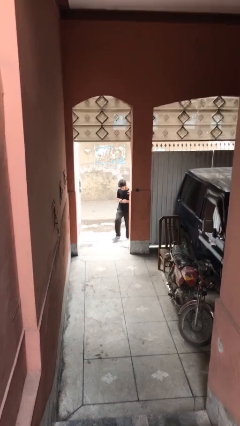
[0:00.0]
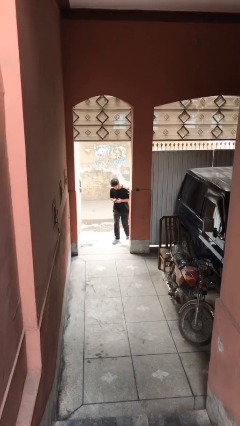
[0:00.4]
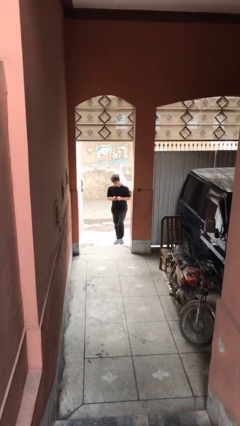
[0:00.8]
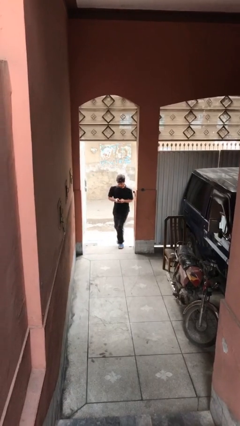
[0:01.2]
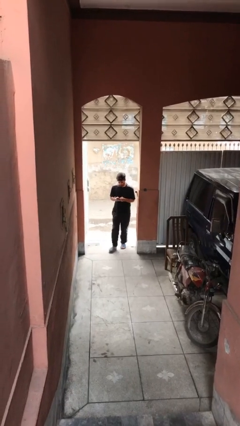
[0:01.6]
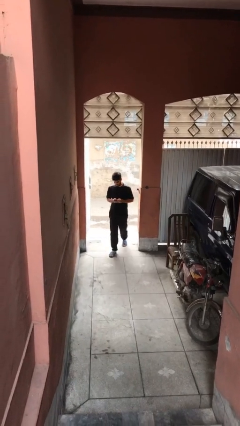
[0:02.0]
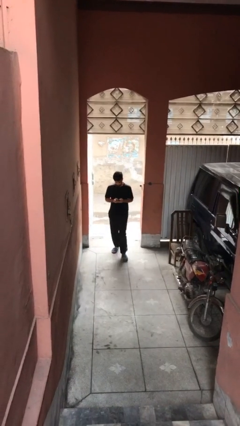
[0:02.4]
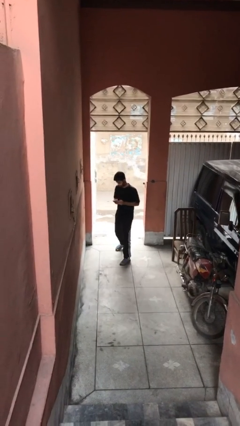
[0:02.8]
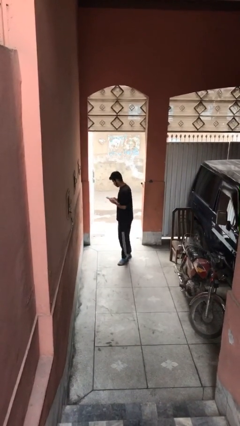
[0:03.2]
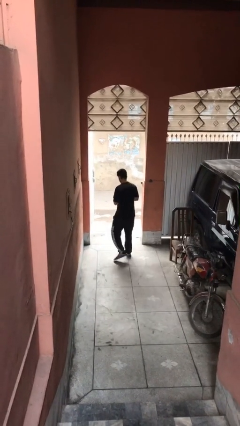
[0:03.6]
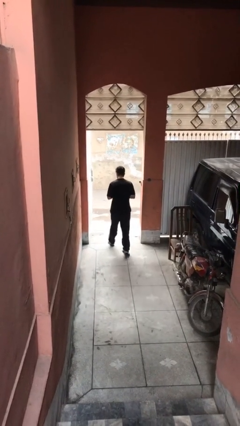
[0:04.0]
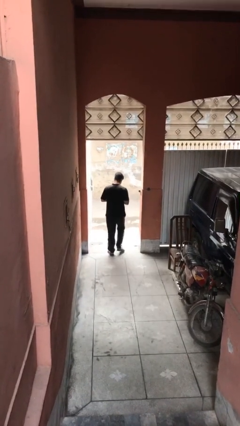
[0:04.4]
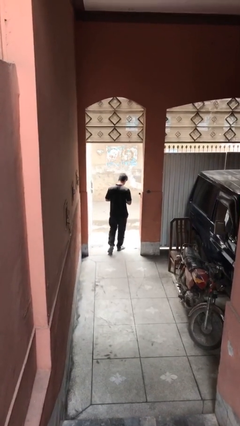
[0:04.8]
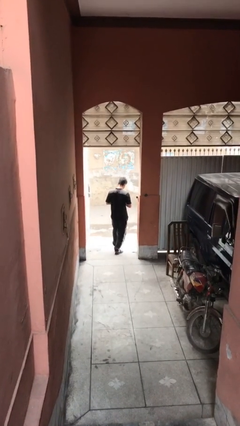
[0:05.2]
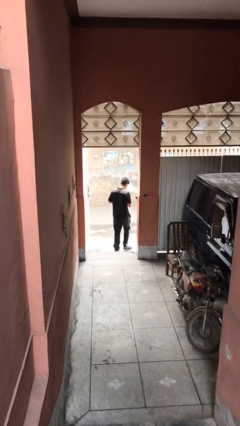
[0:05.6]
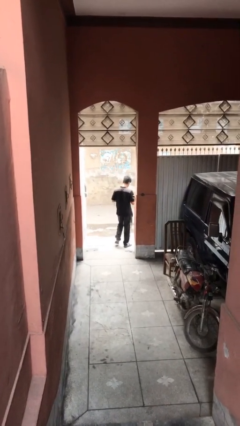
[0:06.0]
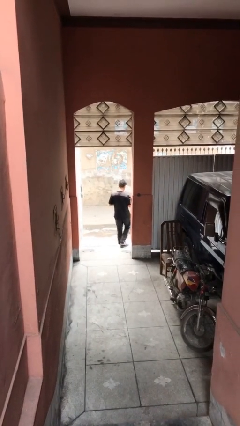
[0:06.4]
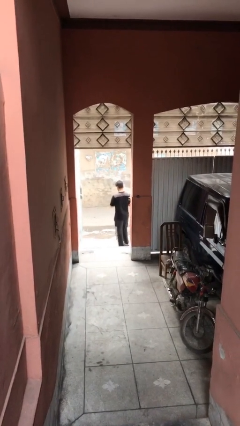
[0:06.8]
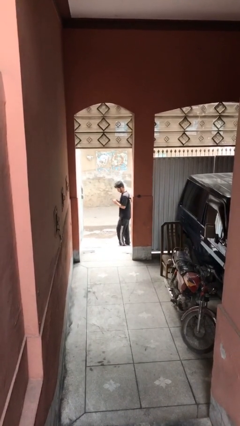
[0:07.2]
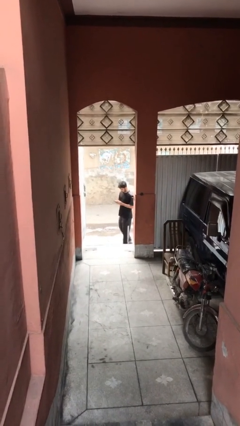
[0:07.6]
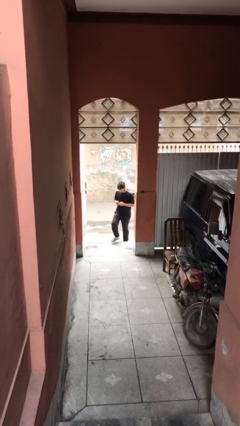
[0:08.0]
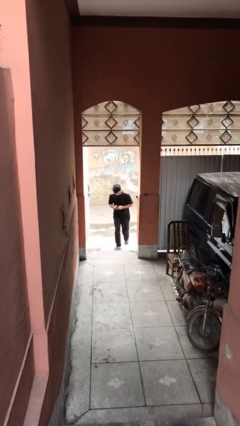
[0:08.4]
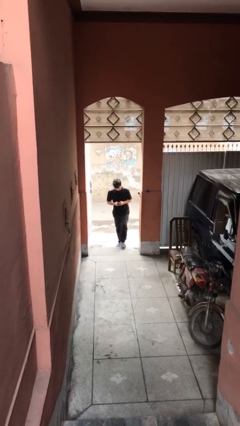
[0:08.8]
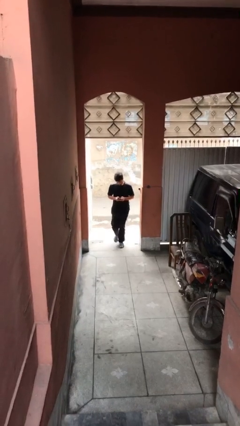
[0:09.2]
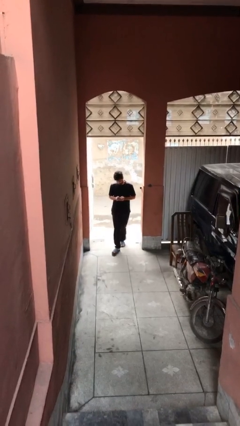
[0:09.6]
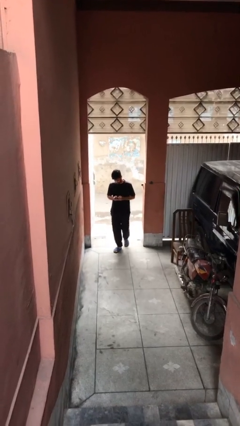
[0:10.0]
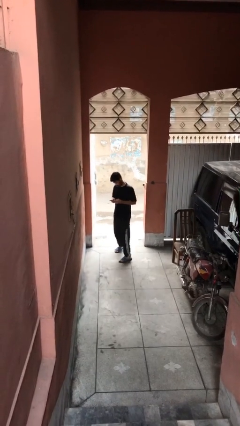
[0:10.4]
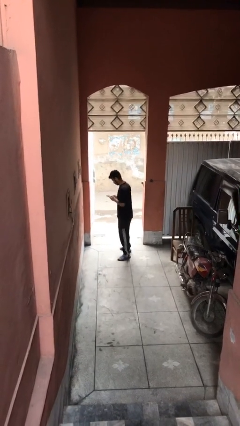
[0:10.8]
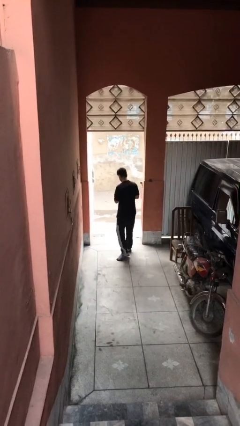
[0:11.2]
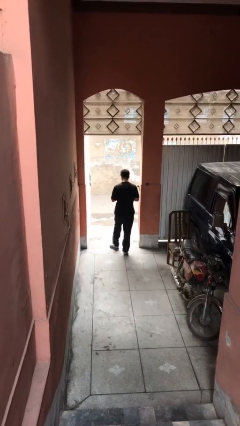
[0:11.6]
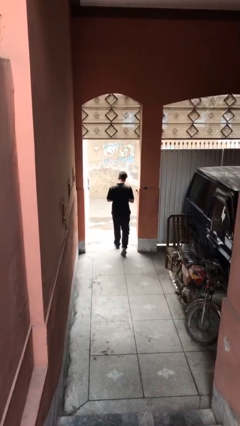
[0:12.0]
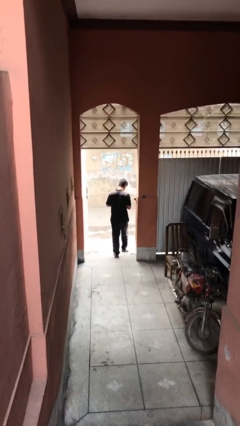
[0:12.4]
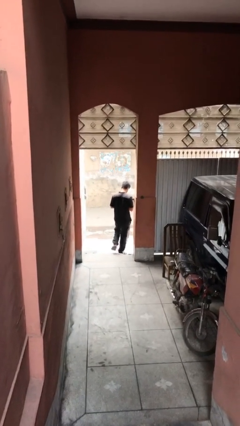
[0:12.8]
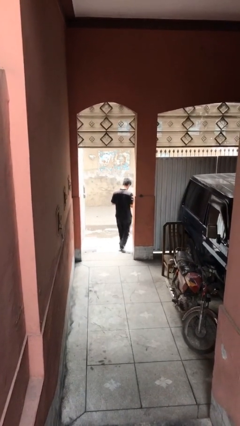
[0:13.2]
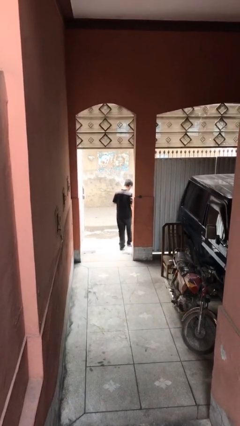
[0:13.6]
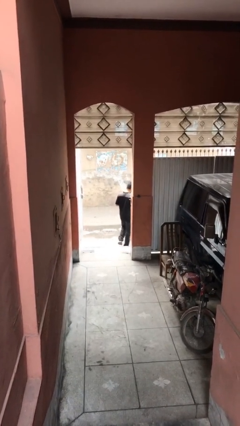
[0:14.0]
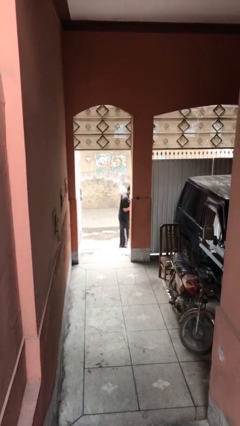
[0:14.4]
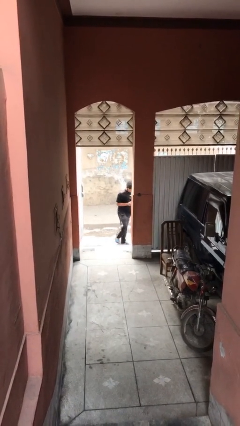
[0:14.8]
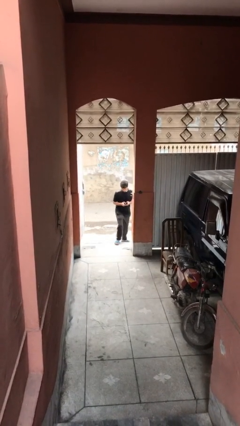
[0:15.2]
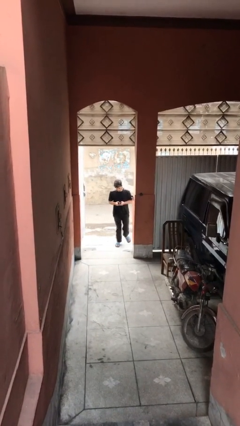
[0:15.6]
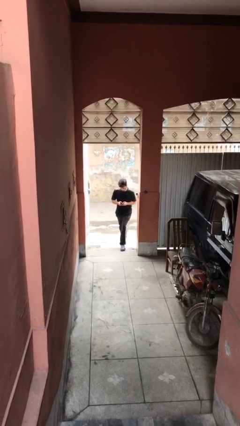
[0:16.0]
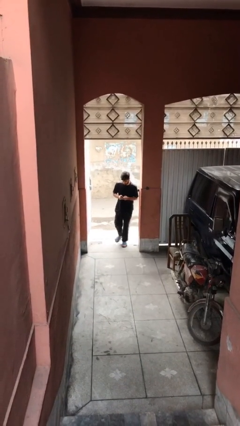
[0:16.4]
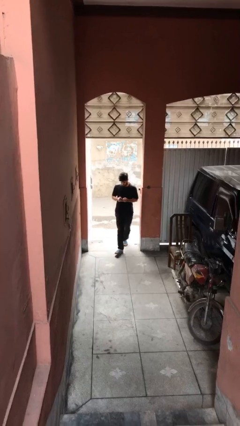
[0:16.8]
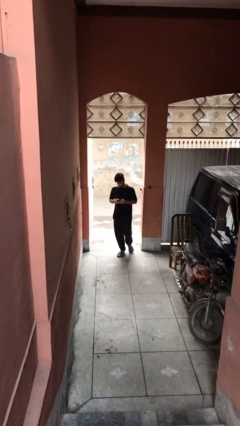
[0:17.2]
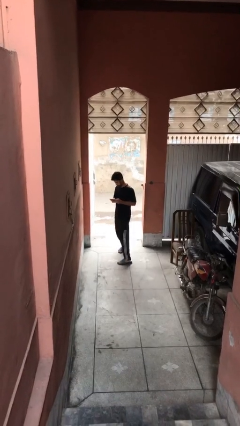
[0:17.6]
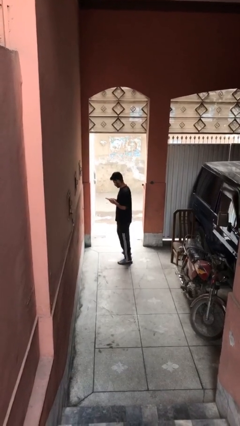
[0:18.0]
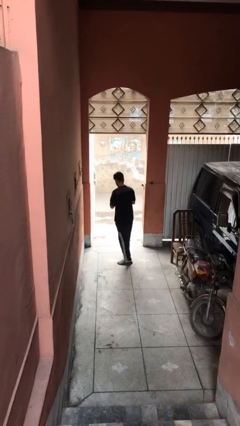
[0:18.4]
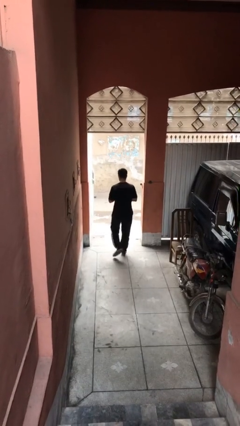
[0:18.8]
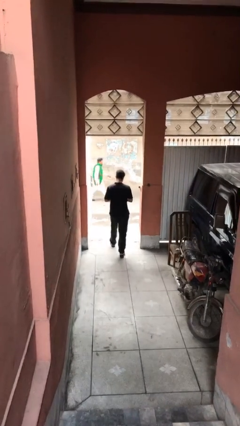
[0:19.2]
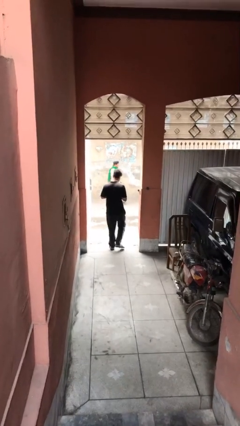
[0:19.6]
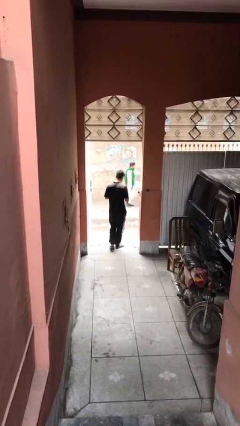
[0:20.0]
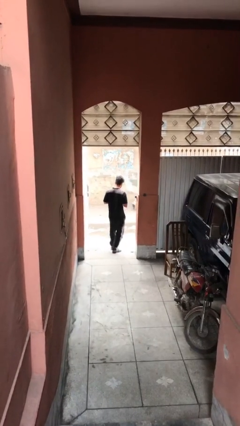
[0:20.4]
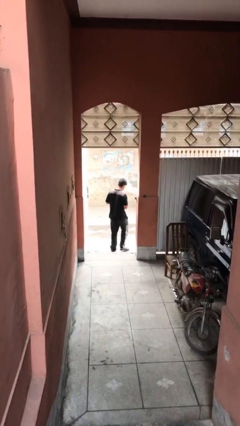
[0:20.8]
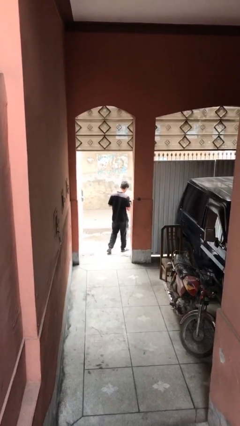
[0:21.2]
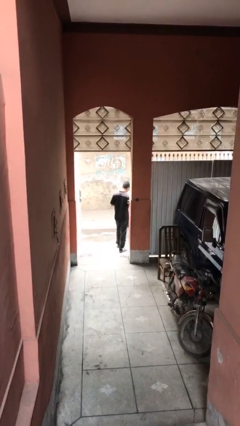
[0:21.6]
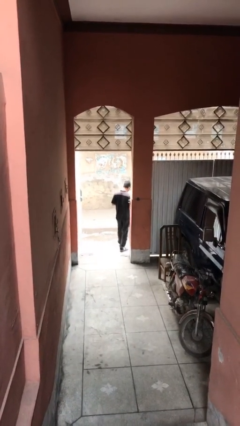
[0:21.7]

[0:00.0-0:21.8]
person texts on phone

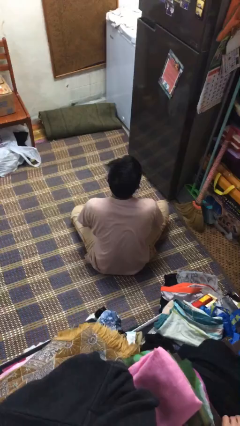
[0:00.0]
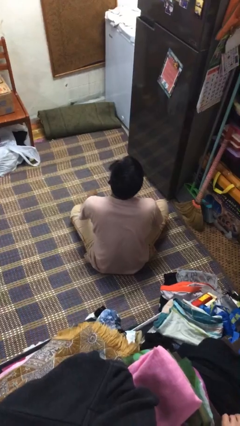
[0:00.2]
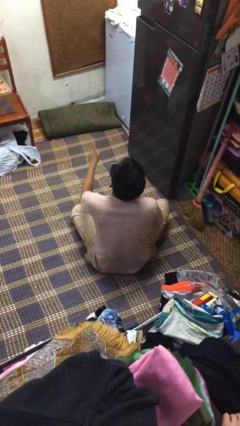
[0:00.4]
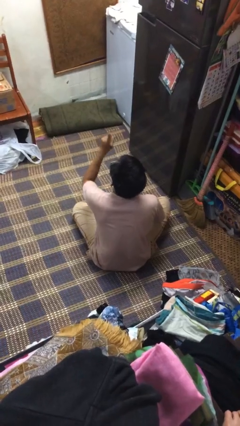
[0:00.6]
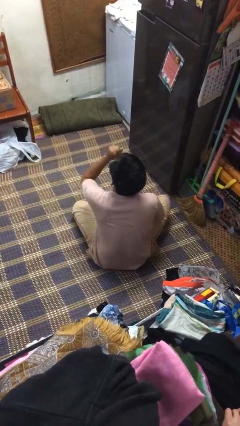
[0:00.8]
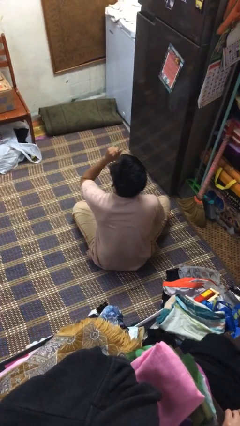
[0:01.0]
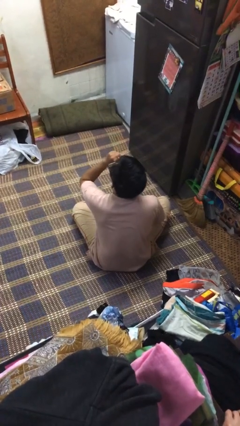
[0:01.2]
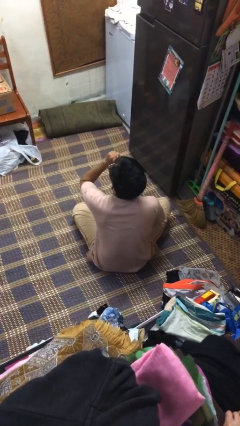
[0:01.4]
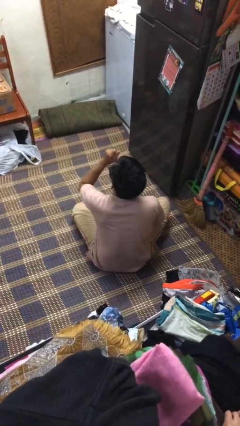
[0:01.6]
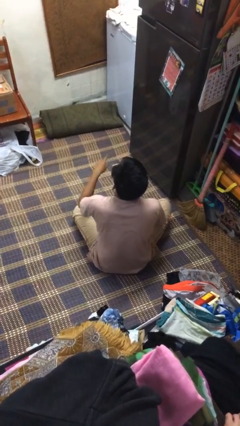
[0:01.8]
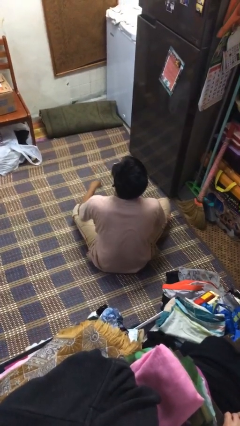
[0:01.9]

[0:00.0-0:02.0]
person gestures be quiet

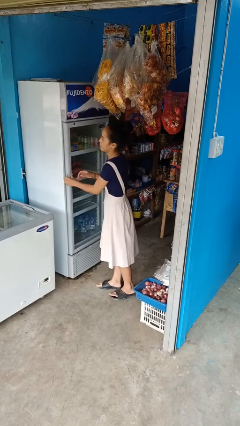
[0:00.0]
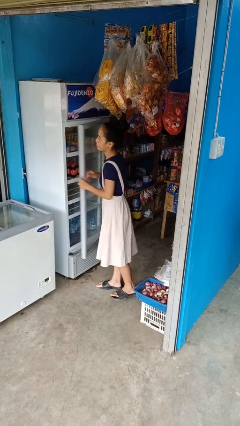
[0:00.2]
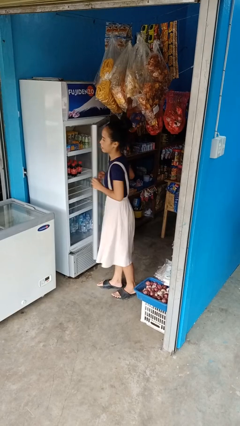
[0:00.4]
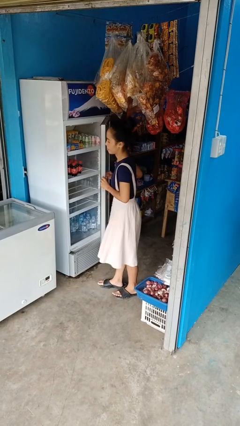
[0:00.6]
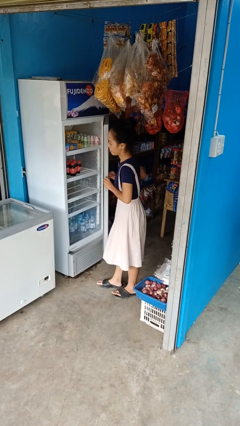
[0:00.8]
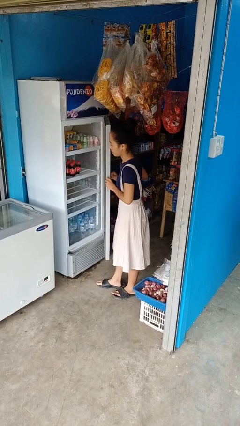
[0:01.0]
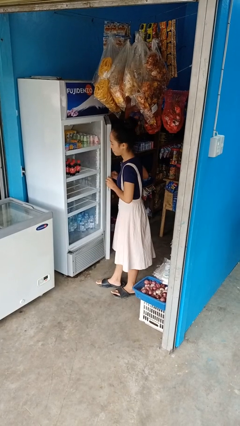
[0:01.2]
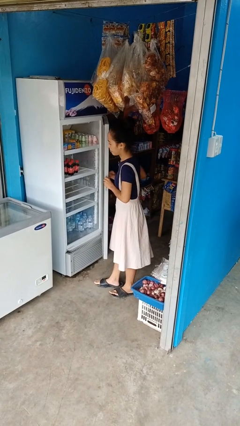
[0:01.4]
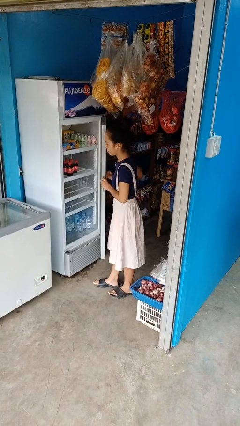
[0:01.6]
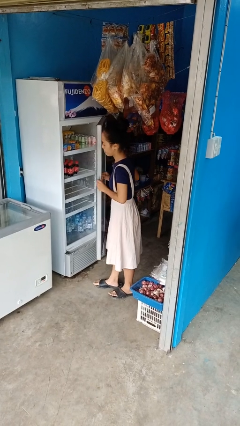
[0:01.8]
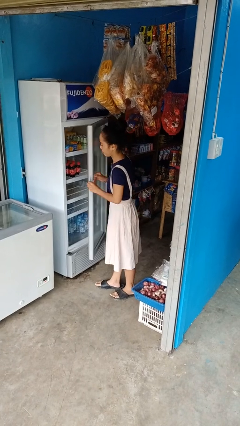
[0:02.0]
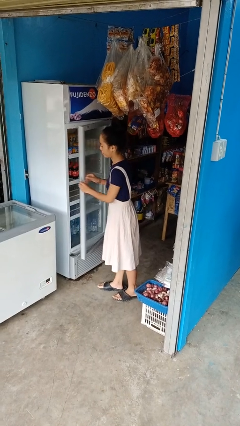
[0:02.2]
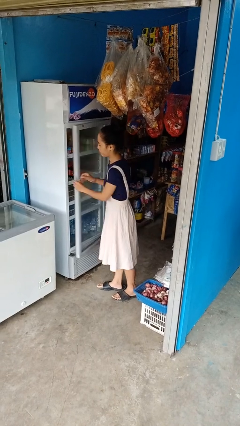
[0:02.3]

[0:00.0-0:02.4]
person opens refrigerator

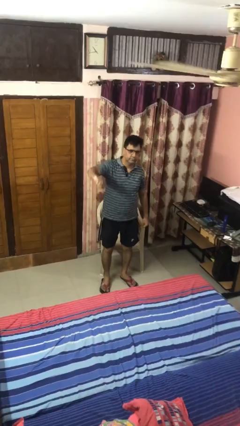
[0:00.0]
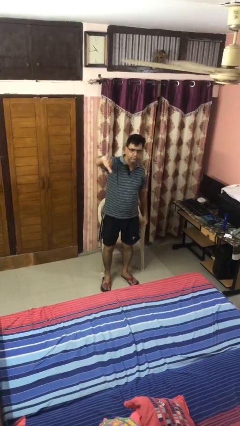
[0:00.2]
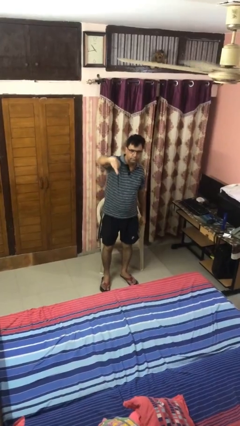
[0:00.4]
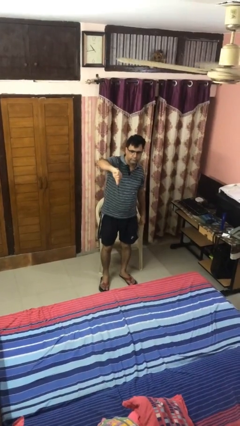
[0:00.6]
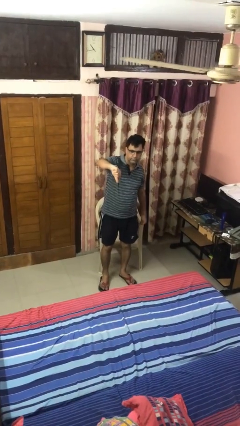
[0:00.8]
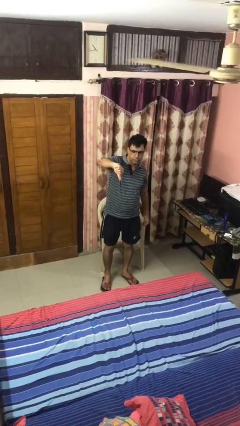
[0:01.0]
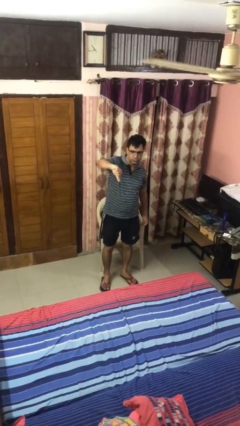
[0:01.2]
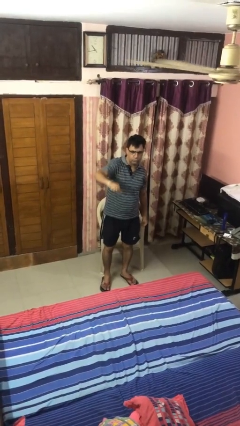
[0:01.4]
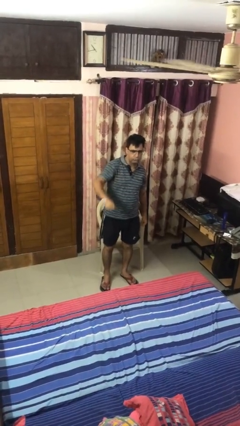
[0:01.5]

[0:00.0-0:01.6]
person gestures thumbs down

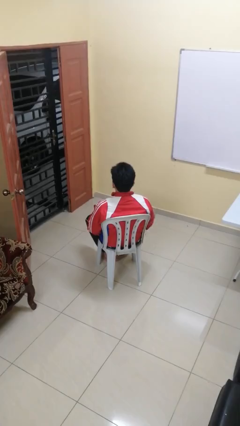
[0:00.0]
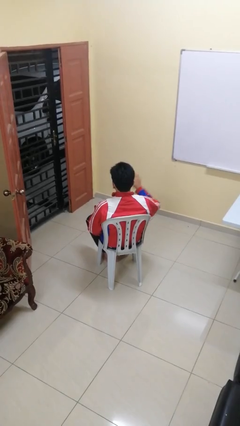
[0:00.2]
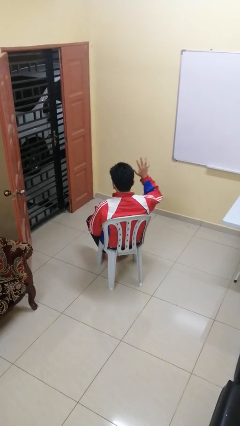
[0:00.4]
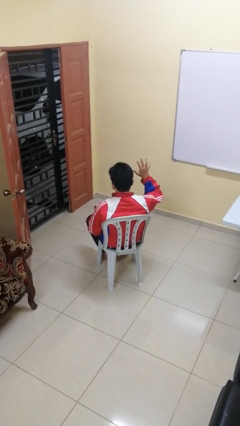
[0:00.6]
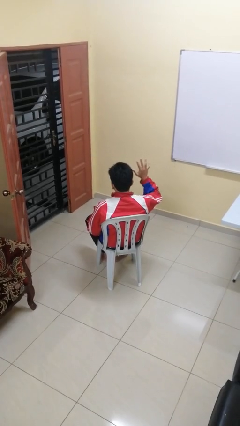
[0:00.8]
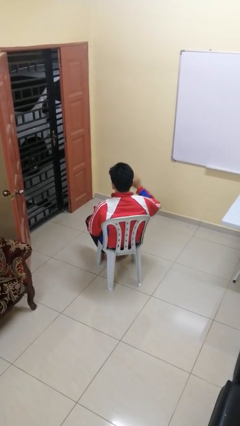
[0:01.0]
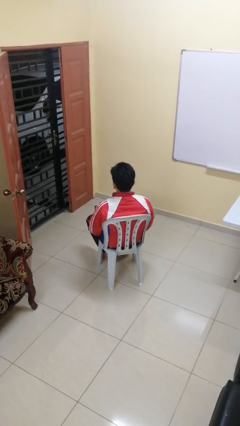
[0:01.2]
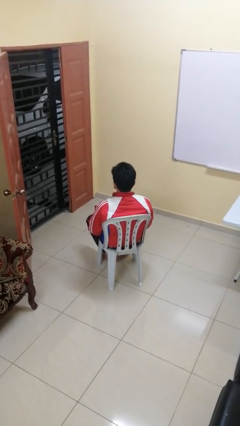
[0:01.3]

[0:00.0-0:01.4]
person gestures number five
